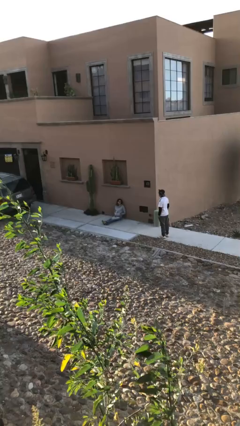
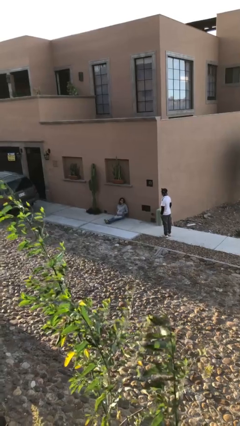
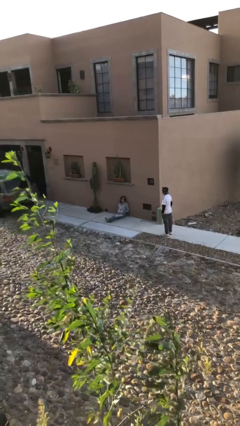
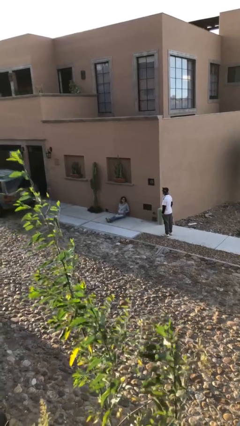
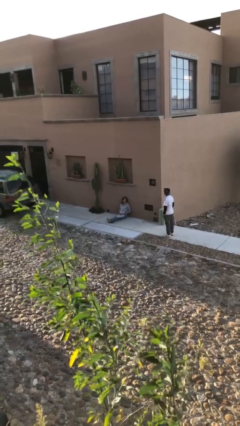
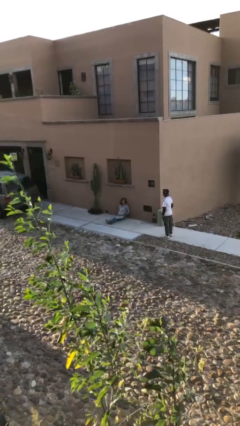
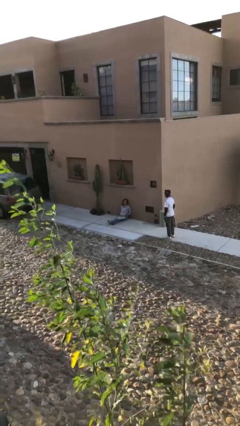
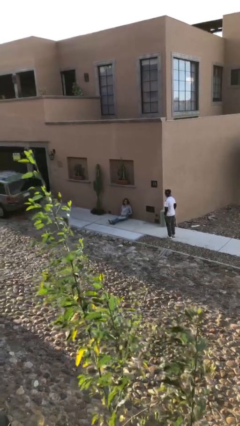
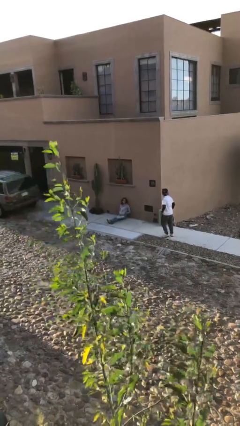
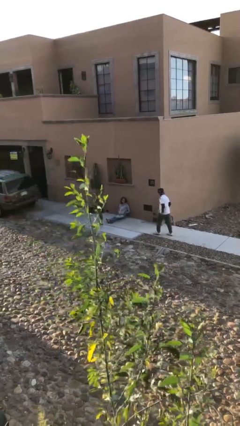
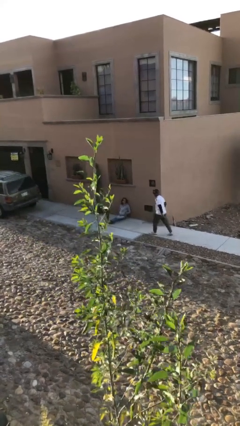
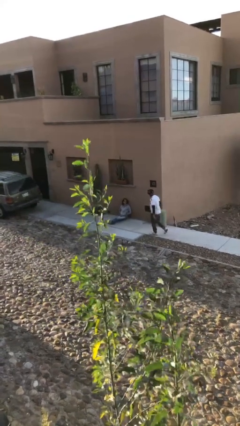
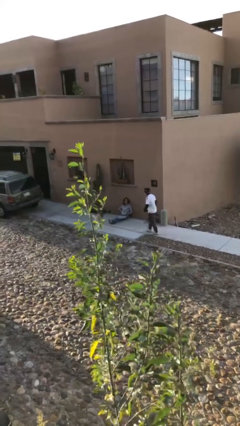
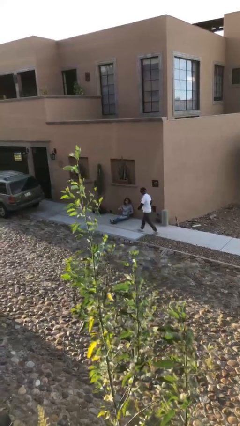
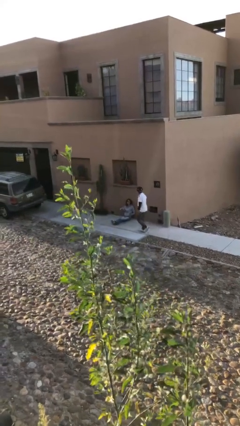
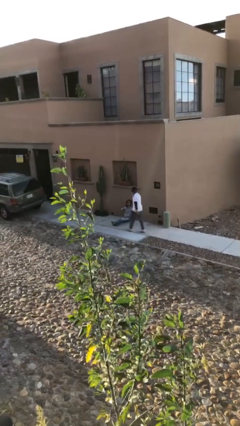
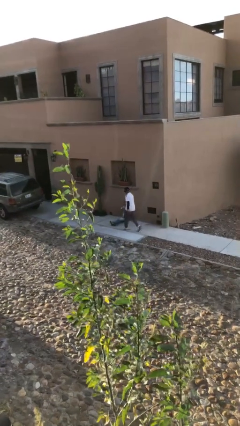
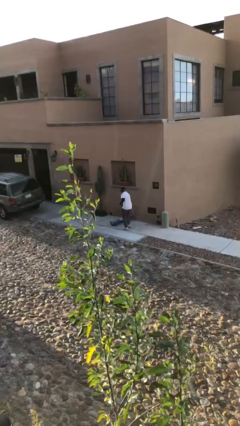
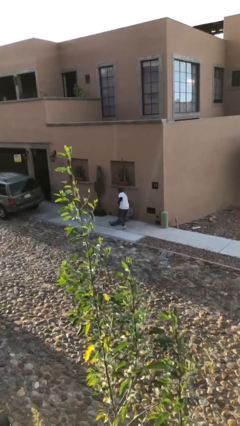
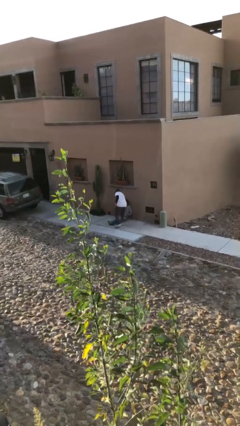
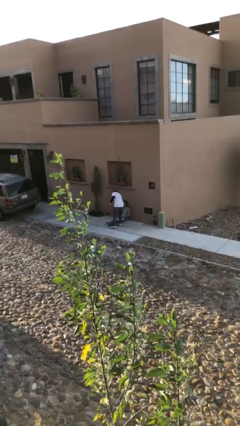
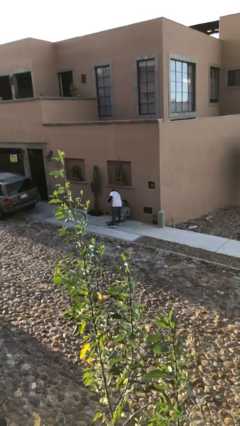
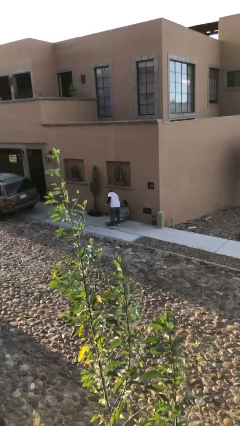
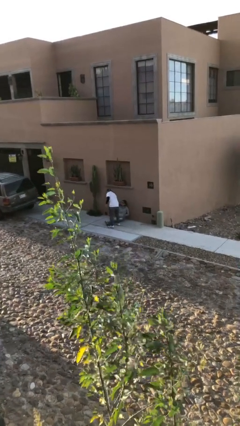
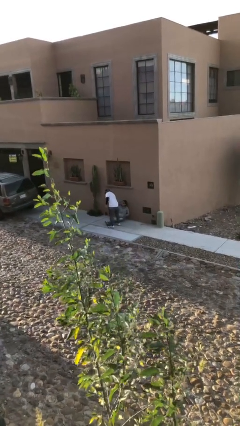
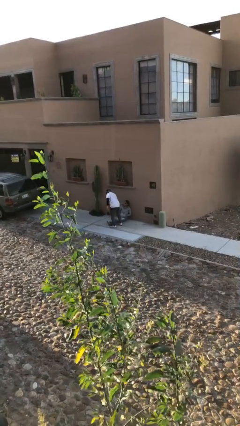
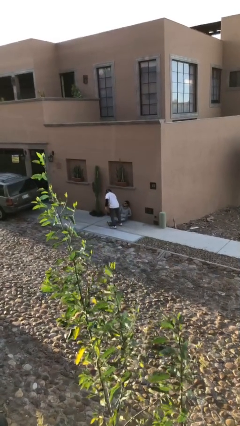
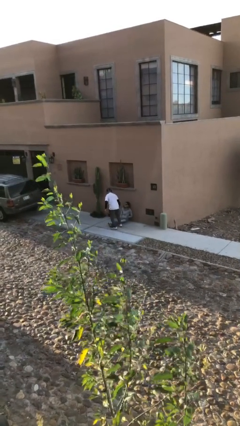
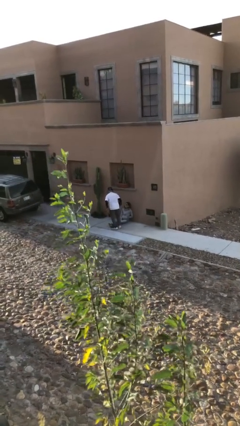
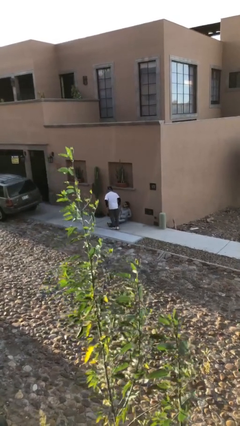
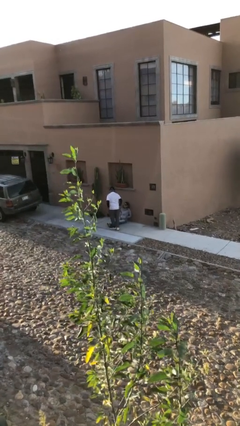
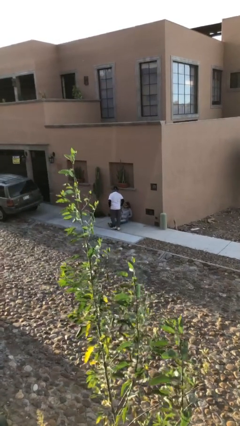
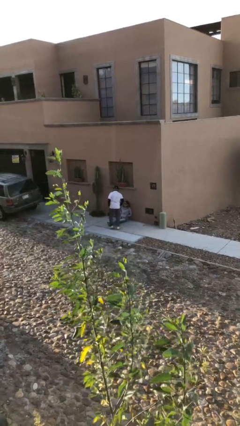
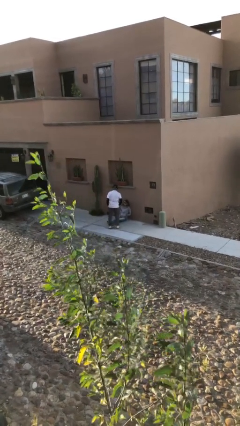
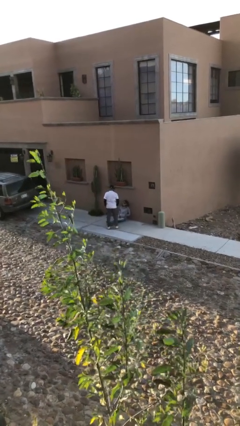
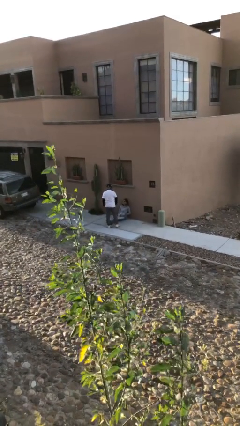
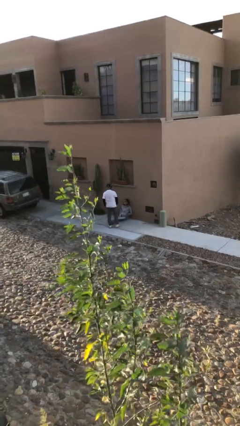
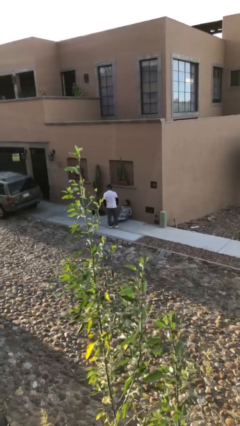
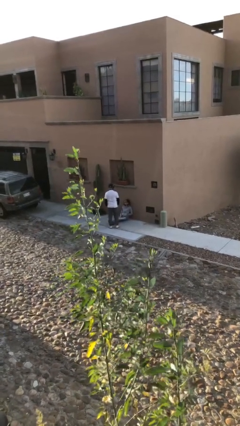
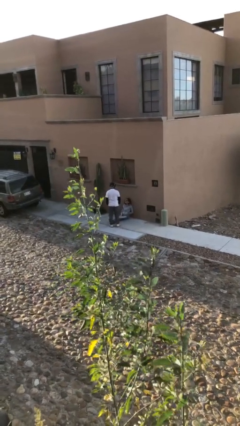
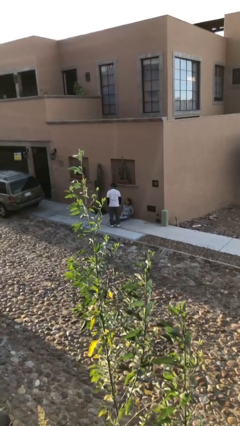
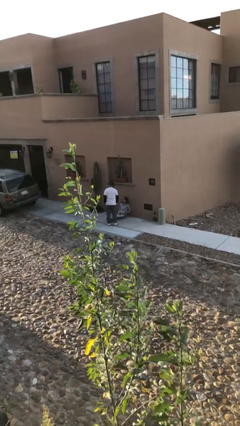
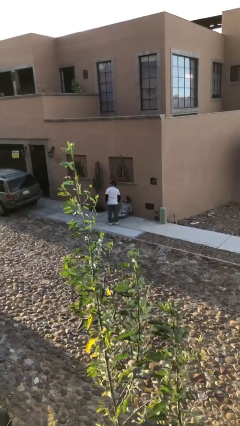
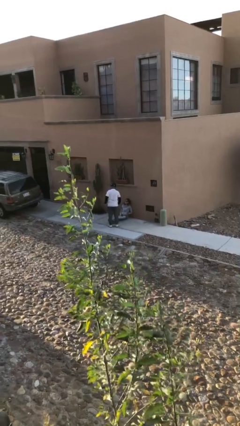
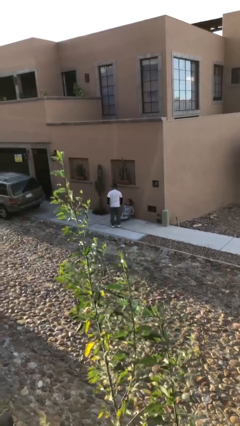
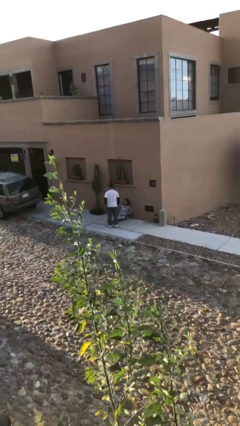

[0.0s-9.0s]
person shakes hand

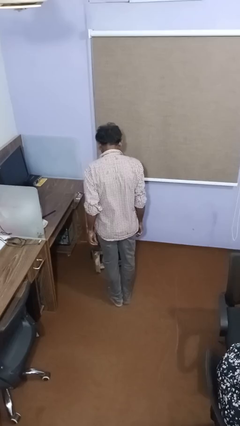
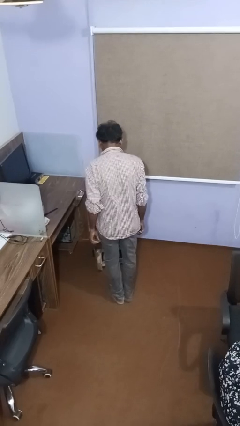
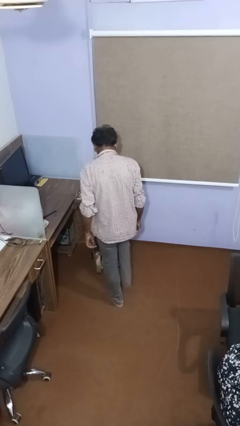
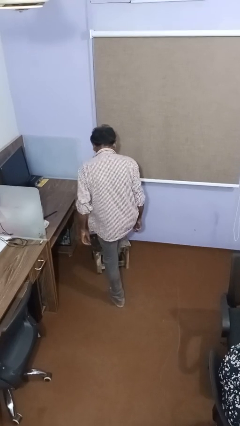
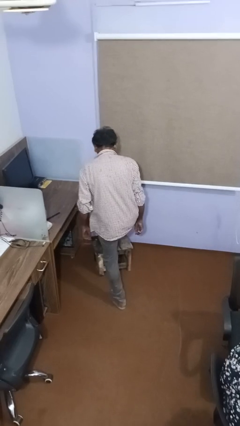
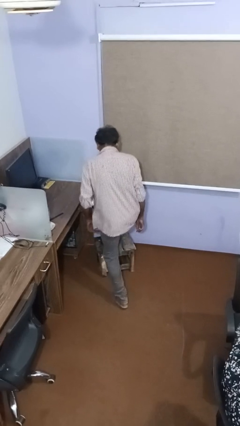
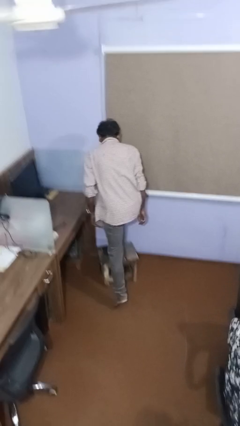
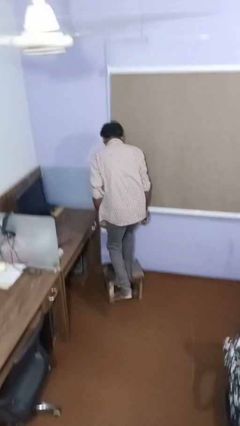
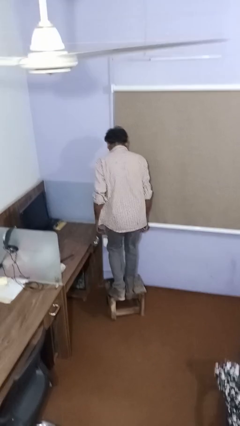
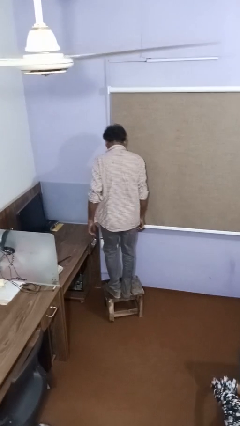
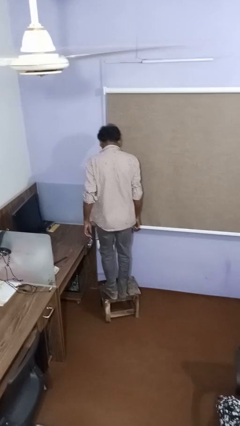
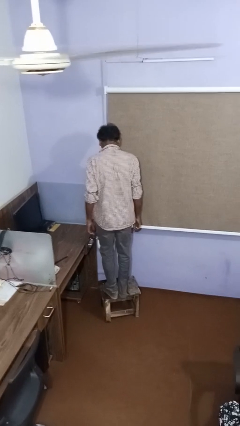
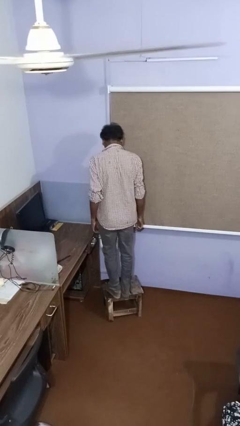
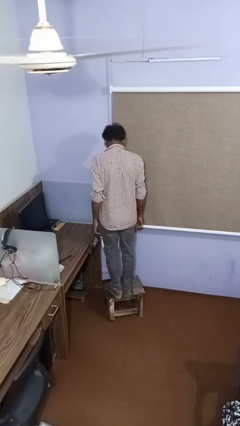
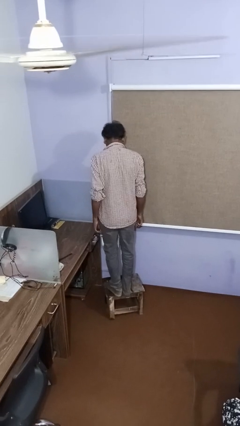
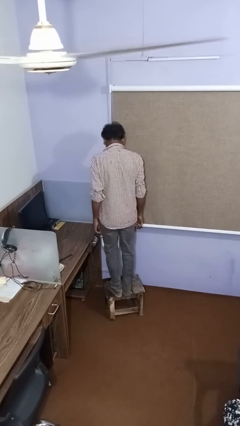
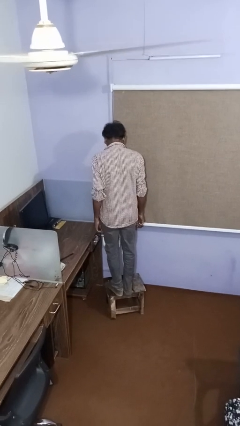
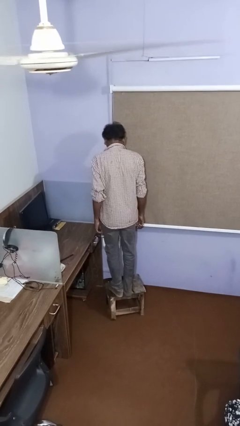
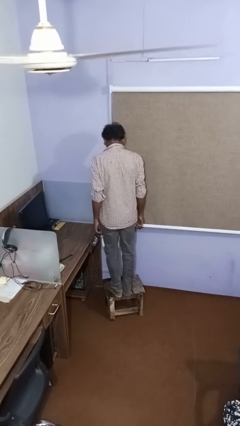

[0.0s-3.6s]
person climbs on table

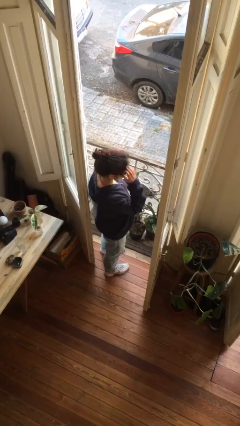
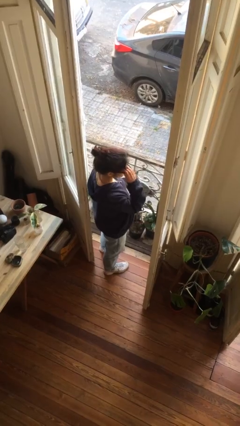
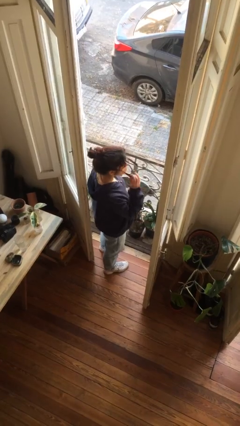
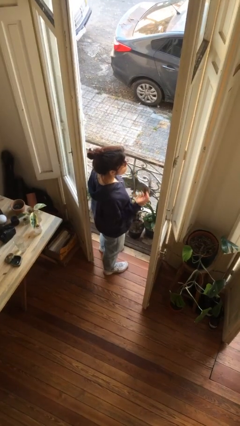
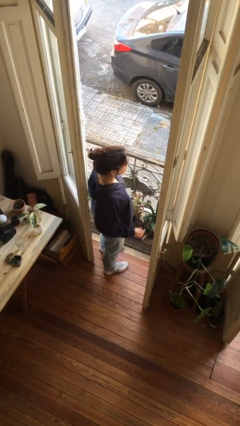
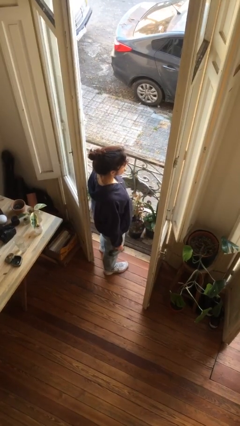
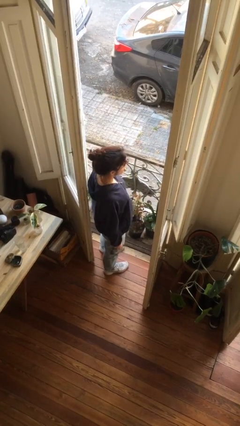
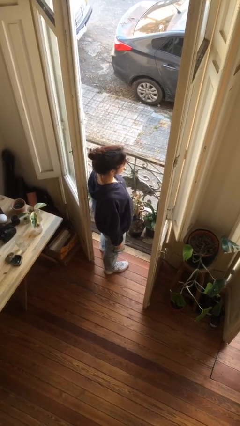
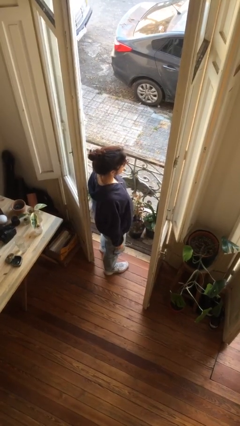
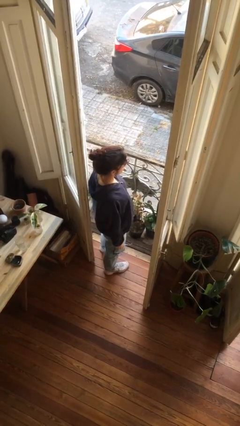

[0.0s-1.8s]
person takes off sunglasses

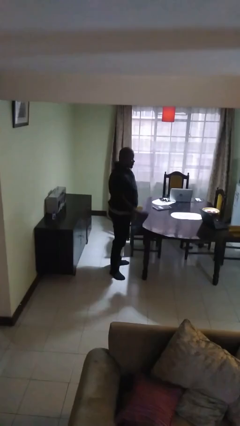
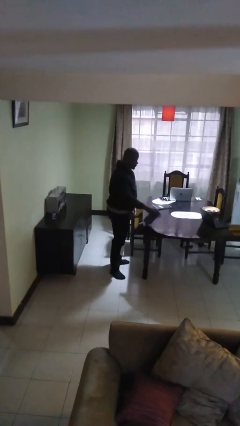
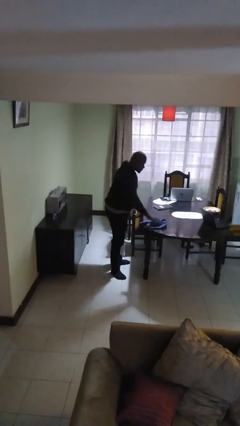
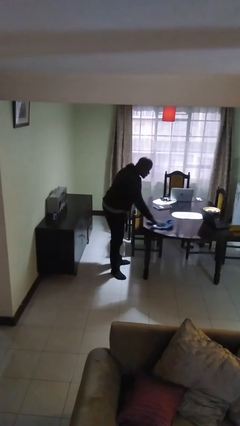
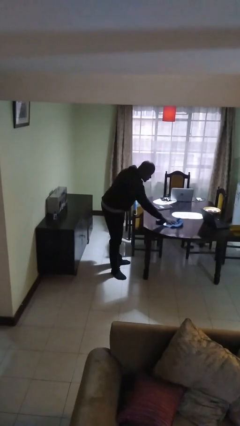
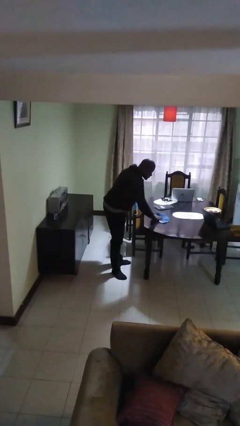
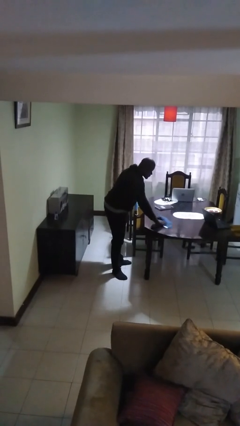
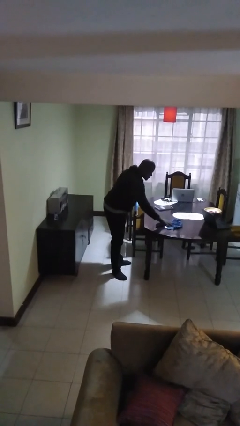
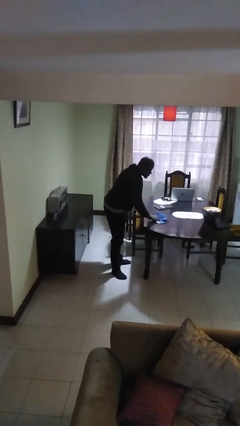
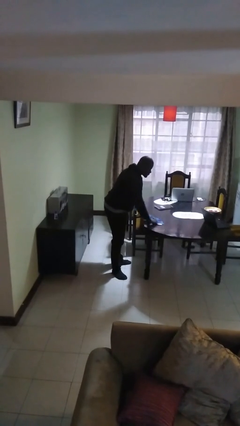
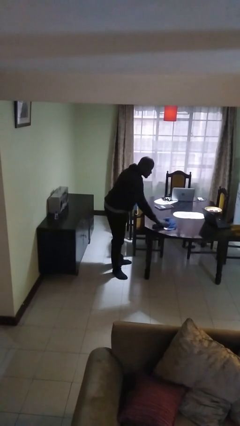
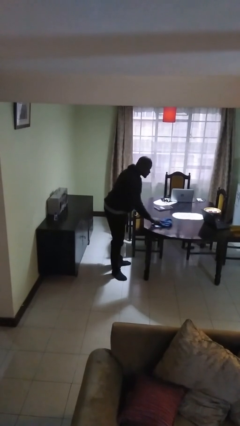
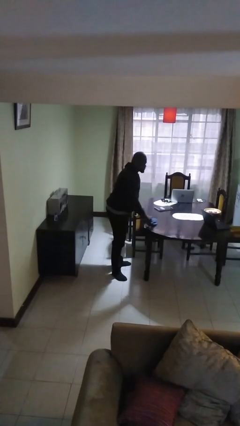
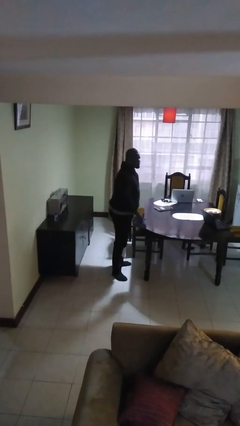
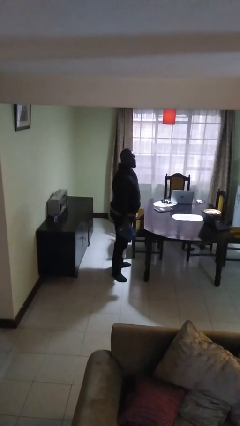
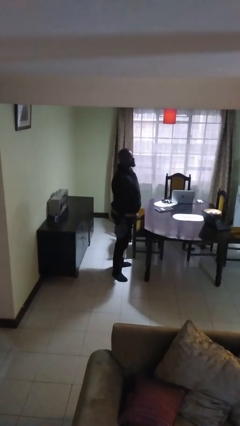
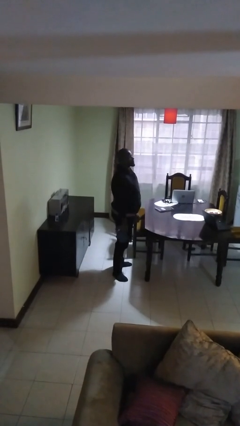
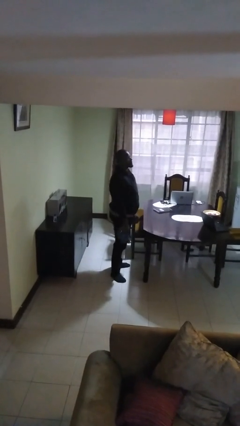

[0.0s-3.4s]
person cleans table with rag
